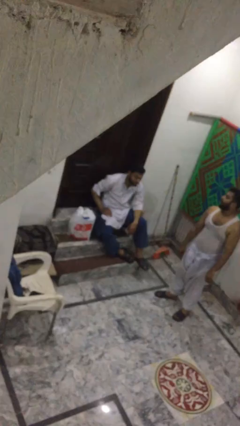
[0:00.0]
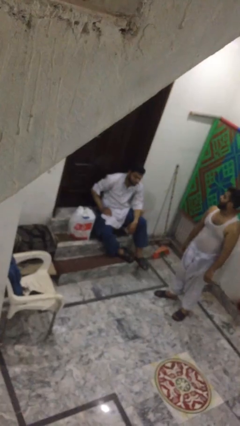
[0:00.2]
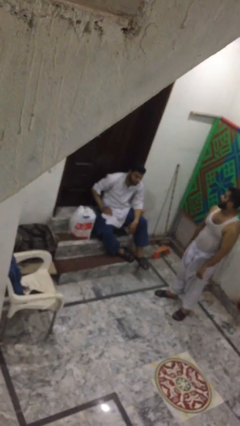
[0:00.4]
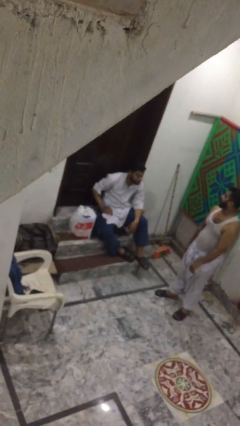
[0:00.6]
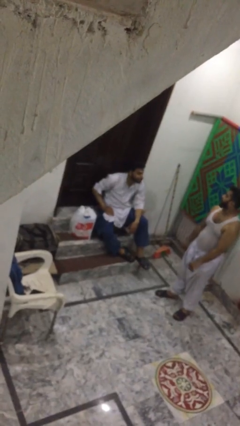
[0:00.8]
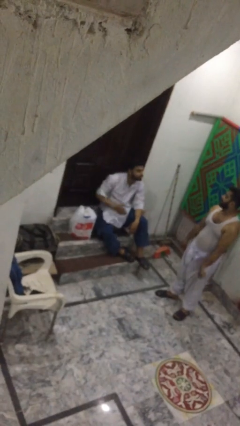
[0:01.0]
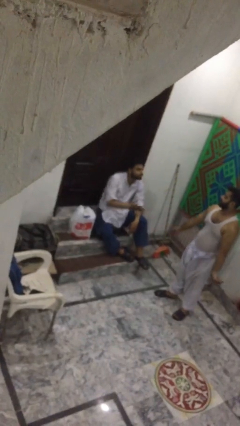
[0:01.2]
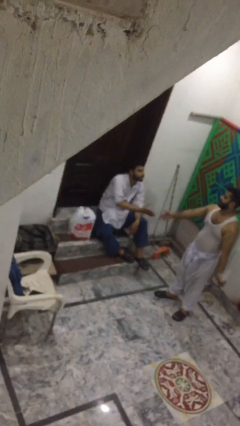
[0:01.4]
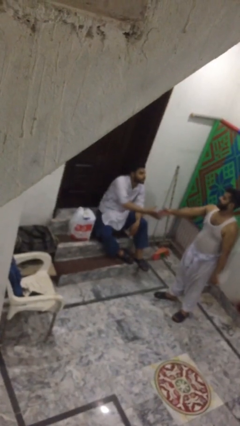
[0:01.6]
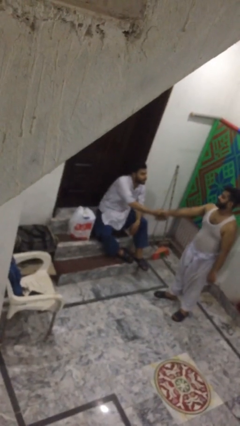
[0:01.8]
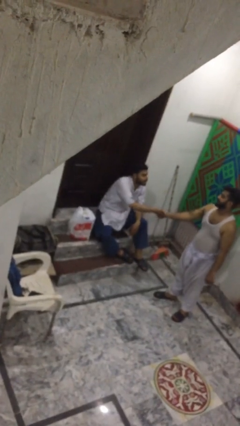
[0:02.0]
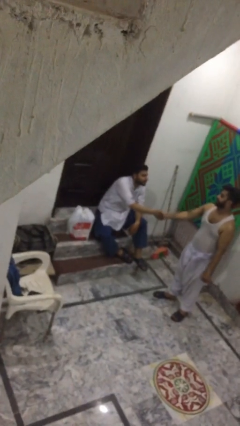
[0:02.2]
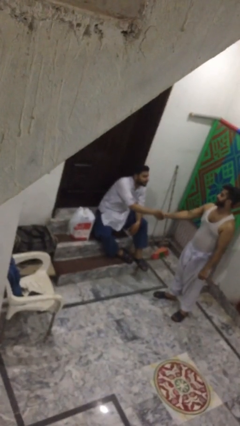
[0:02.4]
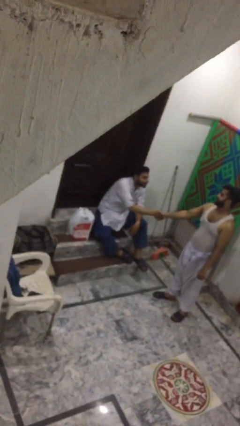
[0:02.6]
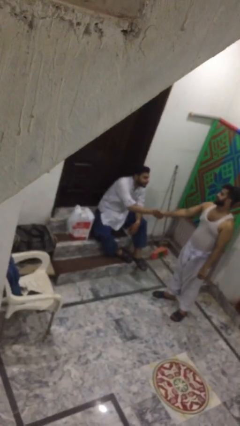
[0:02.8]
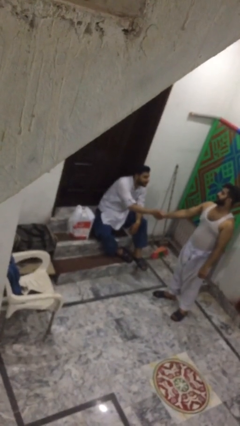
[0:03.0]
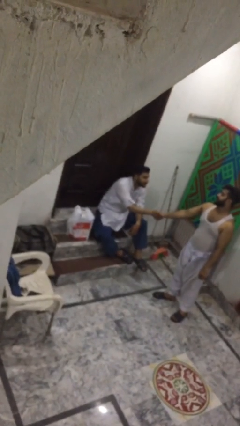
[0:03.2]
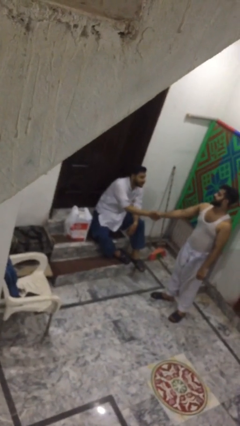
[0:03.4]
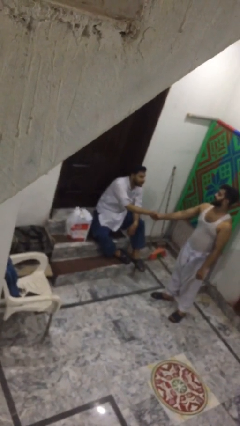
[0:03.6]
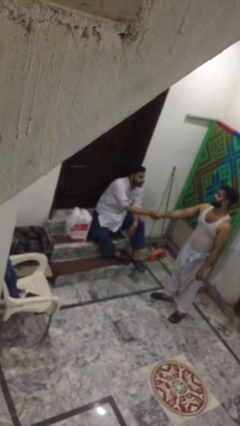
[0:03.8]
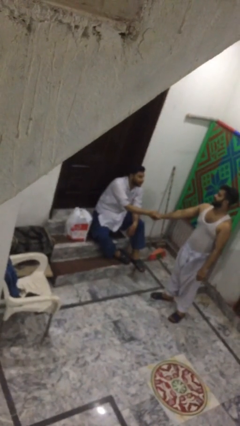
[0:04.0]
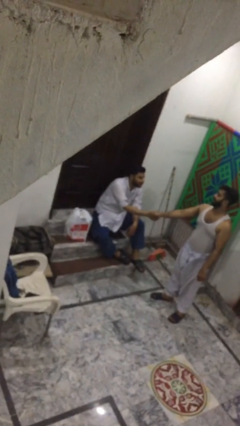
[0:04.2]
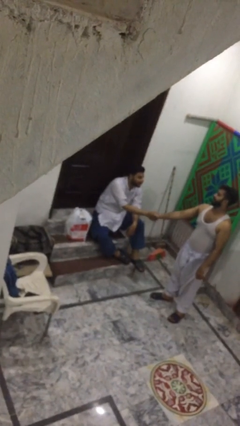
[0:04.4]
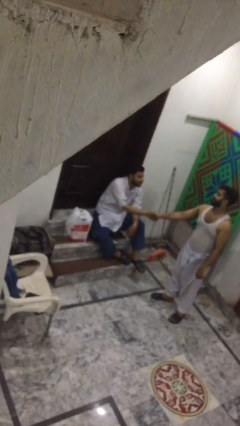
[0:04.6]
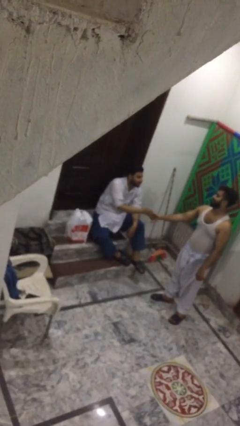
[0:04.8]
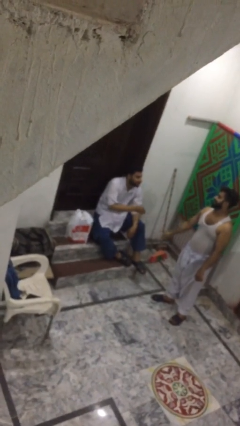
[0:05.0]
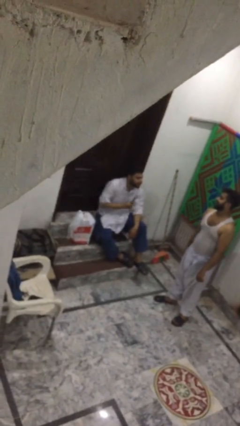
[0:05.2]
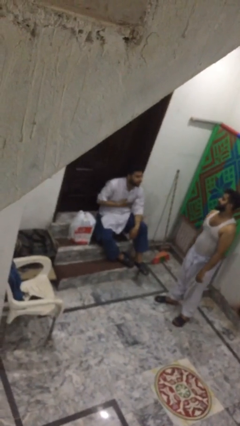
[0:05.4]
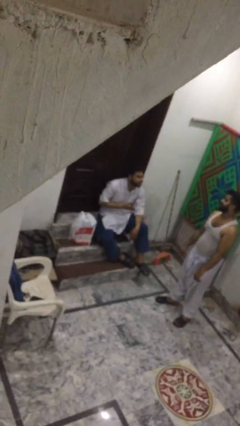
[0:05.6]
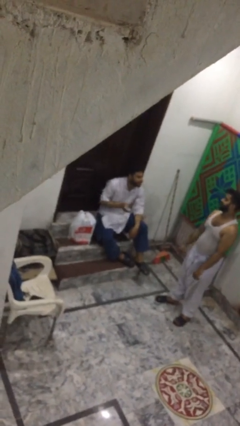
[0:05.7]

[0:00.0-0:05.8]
person shakes hand

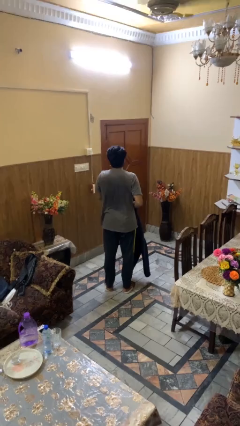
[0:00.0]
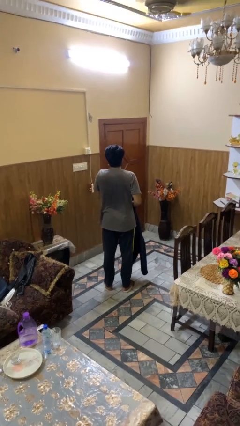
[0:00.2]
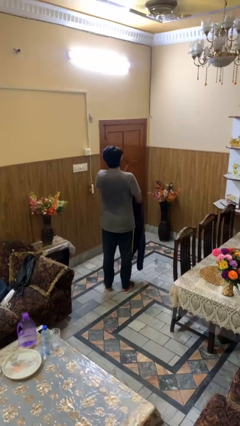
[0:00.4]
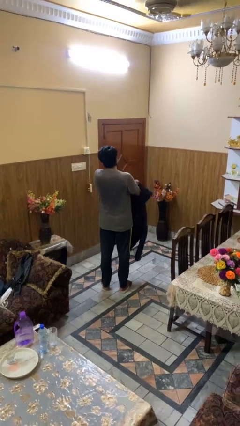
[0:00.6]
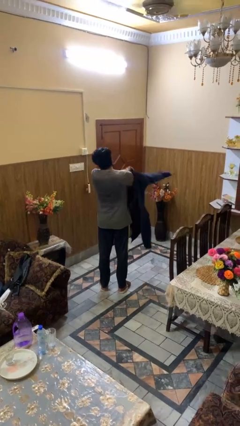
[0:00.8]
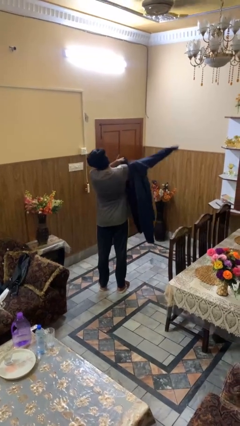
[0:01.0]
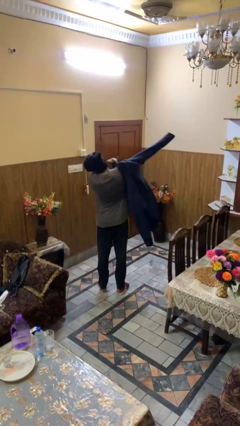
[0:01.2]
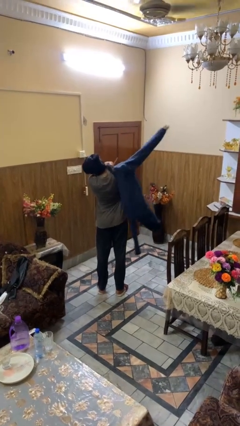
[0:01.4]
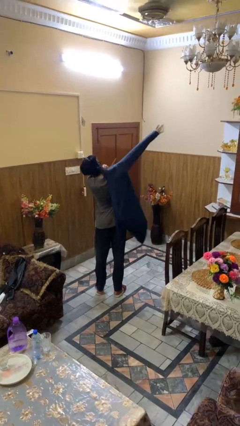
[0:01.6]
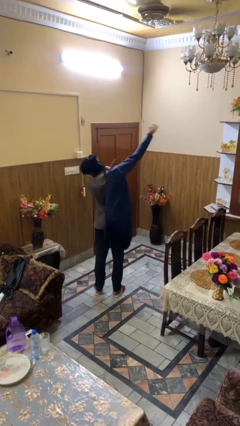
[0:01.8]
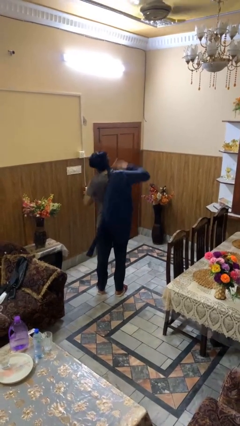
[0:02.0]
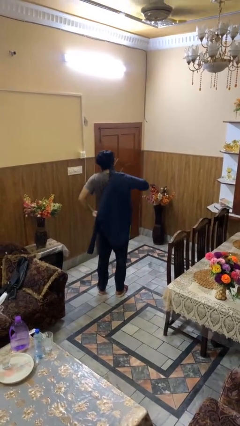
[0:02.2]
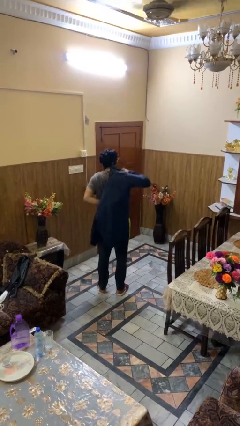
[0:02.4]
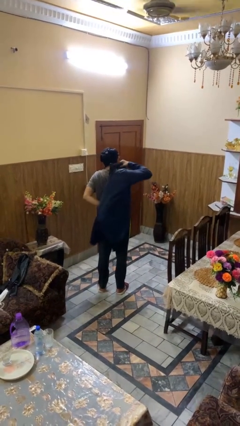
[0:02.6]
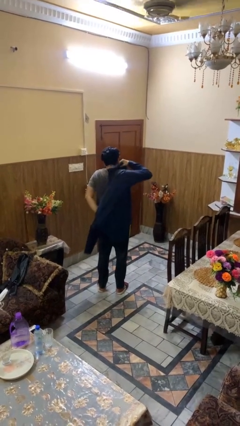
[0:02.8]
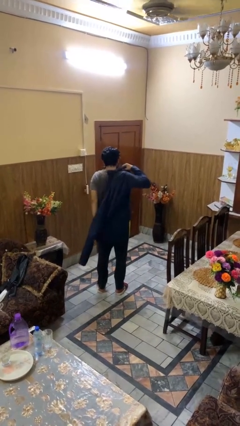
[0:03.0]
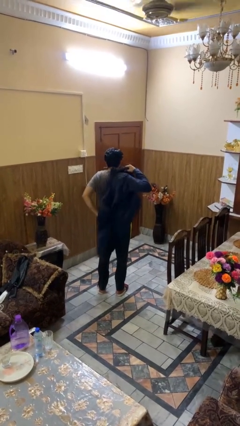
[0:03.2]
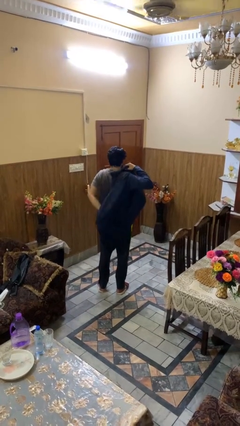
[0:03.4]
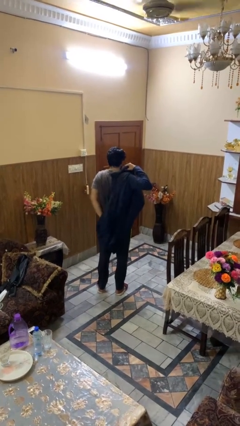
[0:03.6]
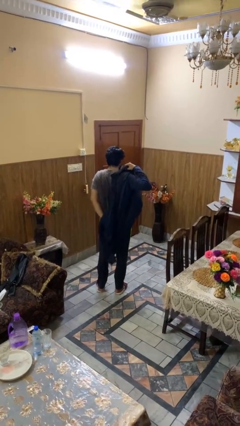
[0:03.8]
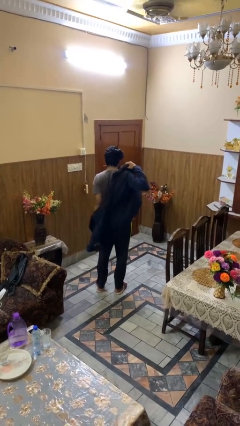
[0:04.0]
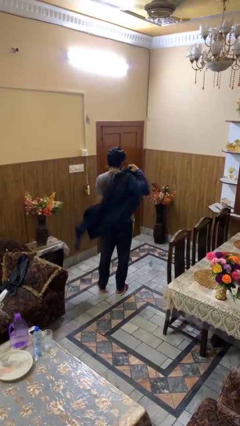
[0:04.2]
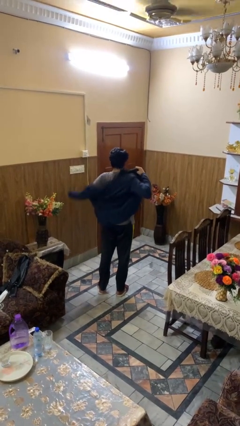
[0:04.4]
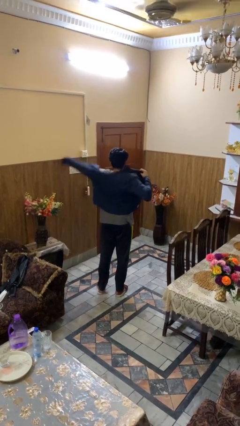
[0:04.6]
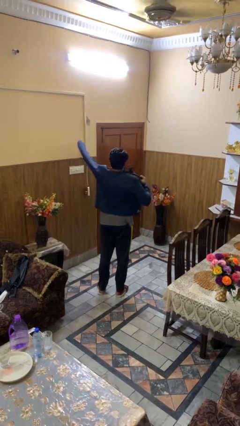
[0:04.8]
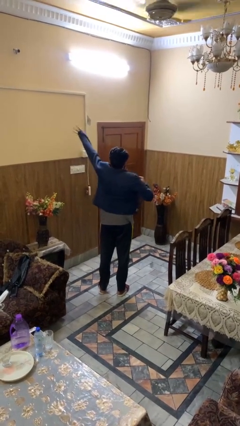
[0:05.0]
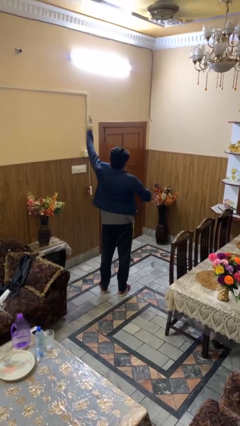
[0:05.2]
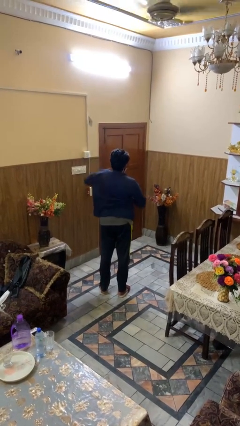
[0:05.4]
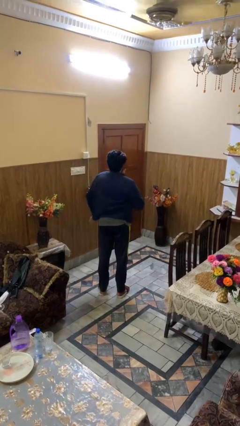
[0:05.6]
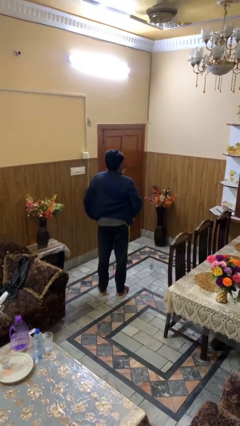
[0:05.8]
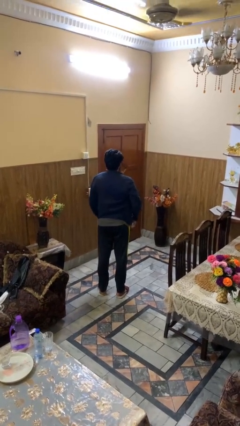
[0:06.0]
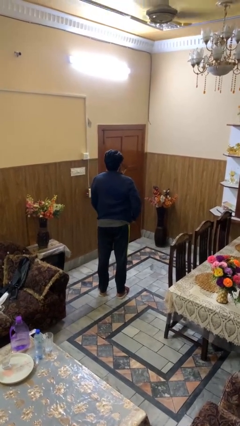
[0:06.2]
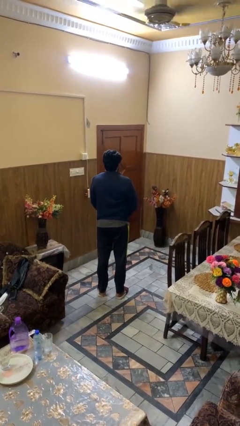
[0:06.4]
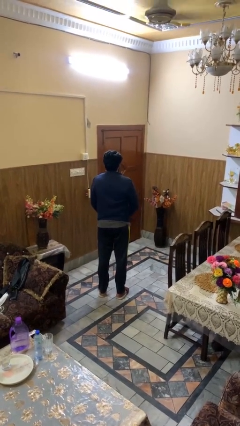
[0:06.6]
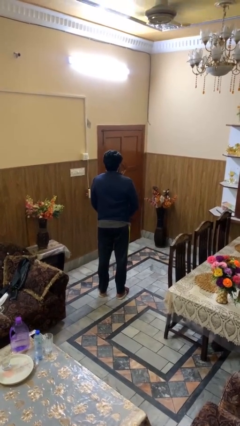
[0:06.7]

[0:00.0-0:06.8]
person puts on jacket

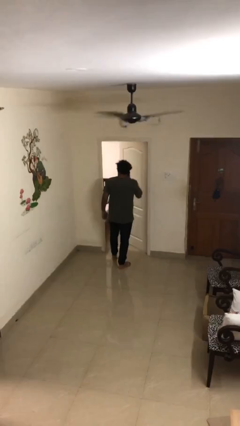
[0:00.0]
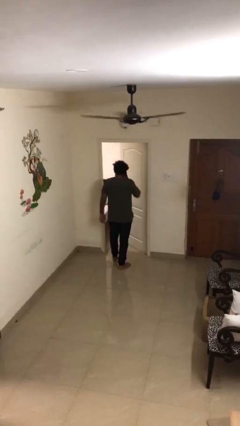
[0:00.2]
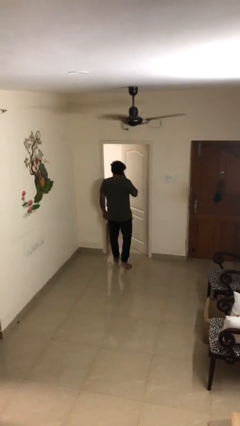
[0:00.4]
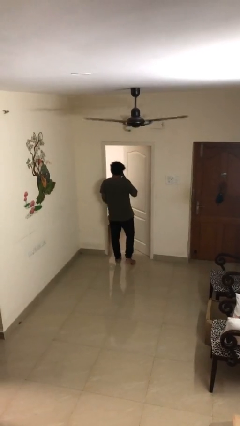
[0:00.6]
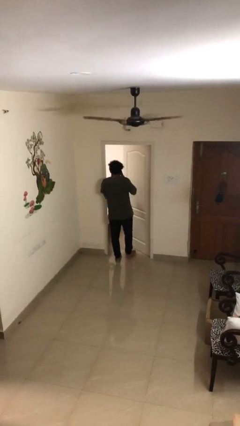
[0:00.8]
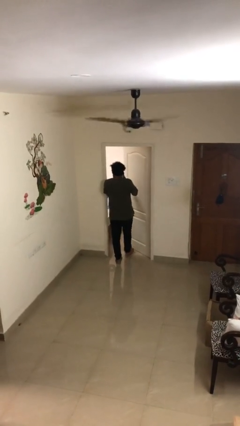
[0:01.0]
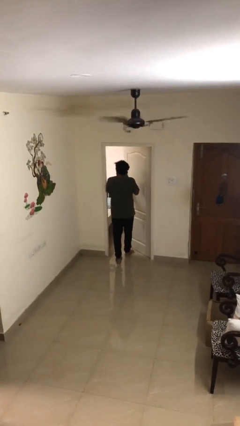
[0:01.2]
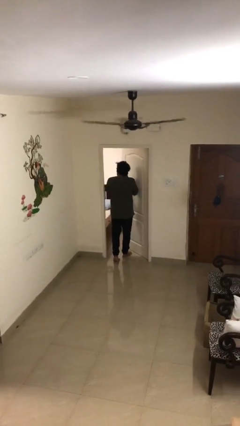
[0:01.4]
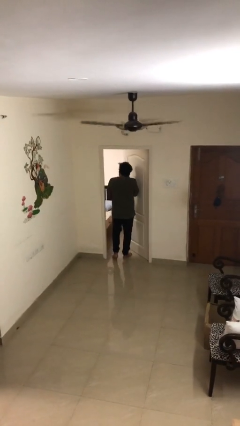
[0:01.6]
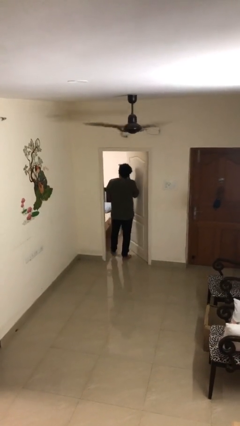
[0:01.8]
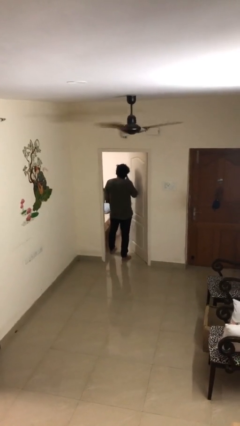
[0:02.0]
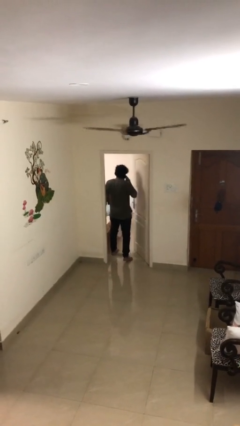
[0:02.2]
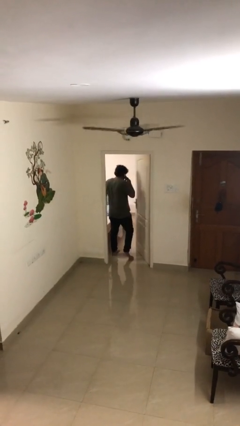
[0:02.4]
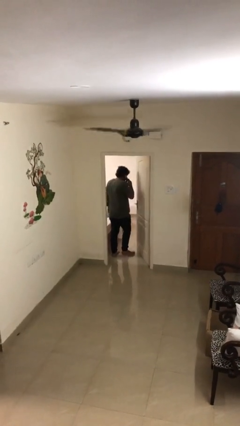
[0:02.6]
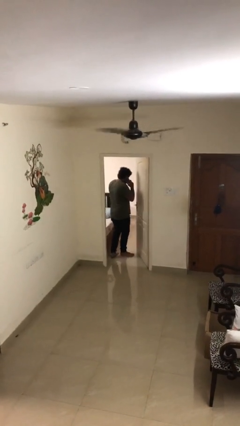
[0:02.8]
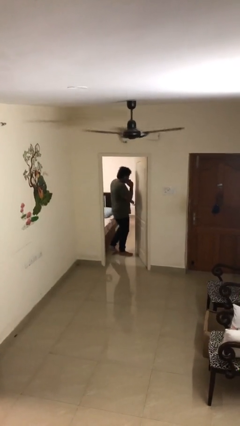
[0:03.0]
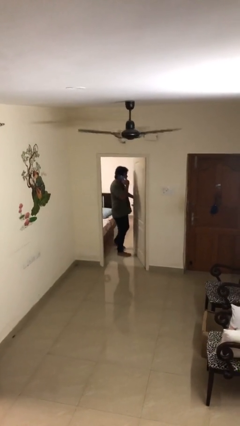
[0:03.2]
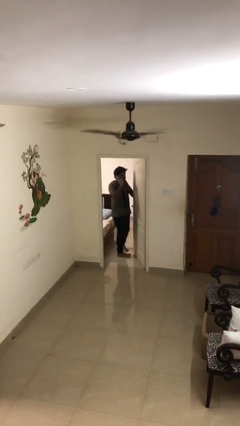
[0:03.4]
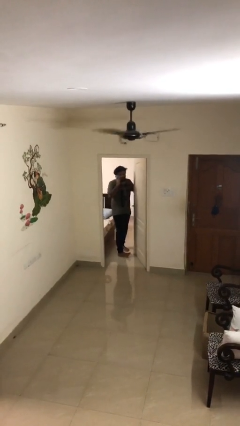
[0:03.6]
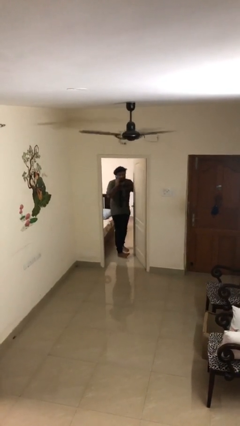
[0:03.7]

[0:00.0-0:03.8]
person exits scene through structure

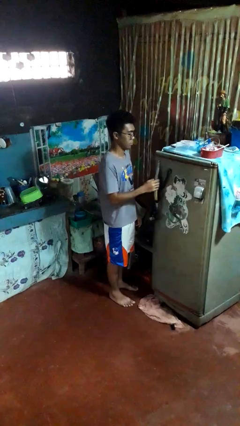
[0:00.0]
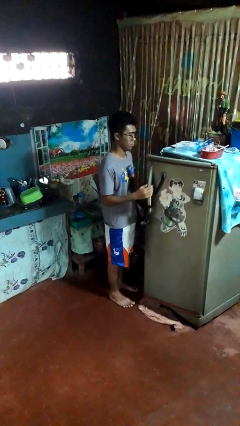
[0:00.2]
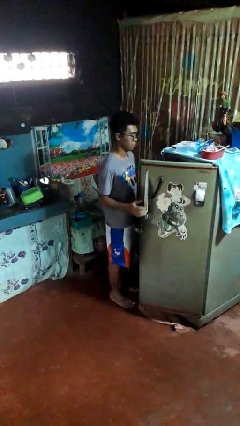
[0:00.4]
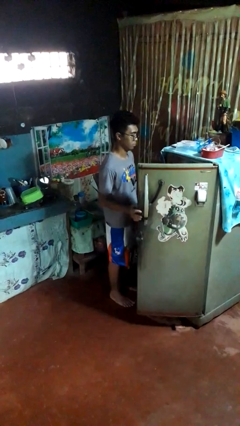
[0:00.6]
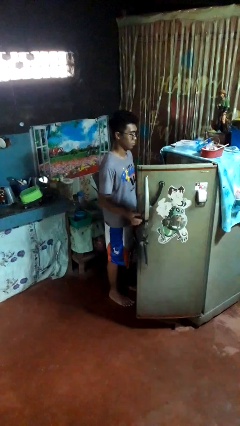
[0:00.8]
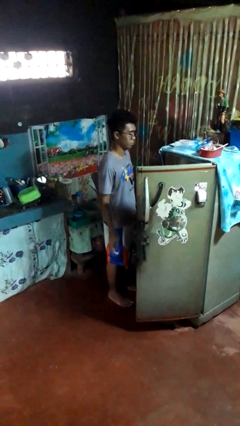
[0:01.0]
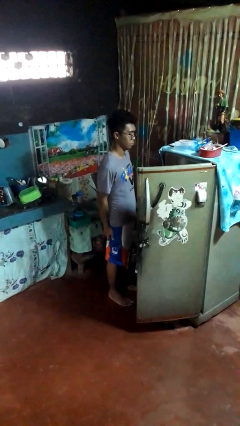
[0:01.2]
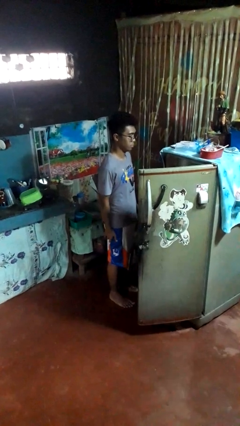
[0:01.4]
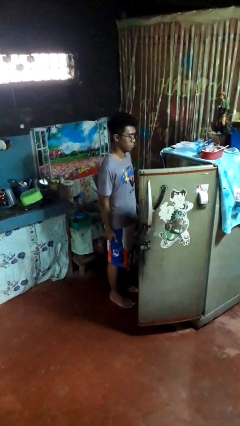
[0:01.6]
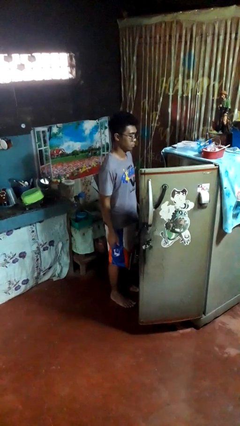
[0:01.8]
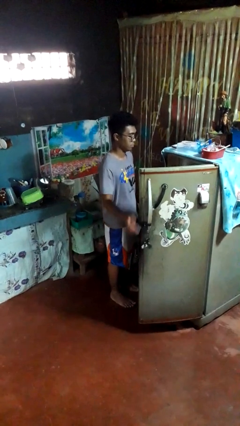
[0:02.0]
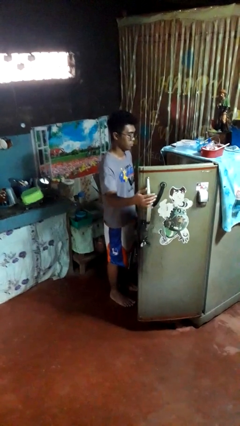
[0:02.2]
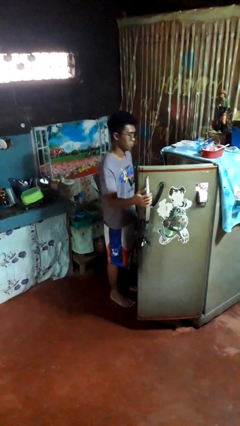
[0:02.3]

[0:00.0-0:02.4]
person opens refrigerator
